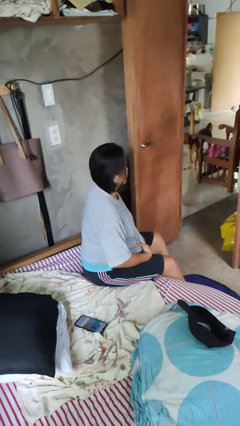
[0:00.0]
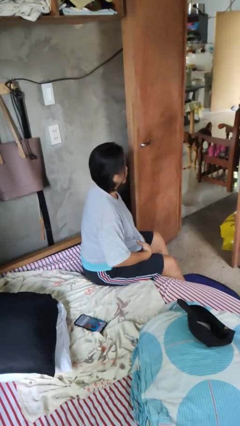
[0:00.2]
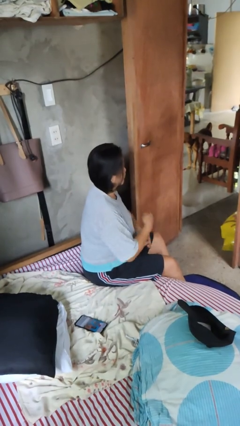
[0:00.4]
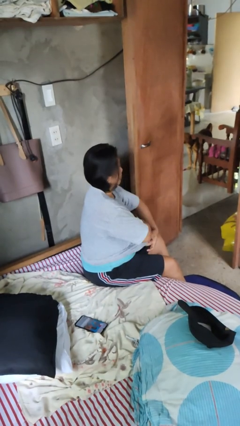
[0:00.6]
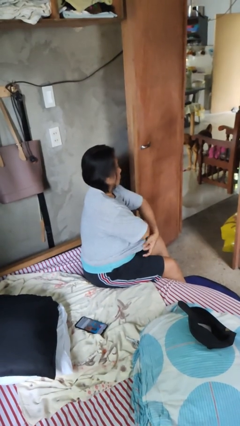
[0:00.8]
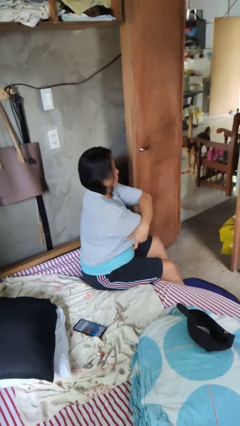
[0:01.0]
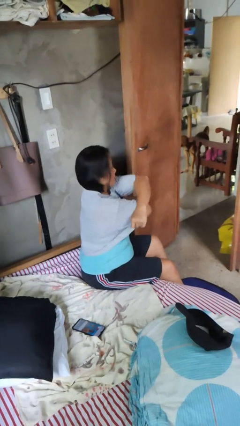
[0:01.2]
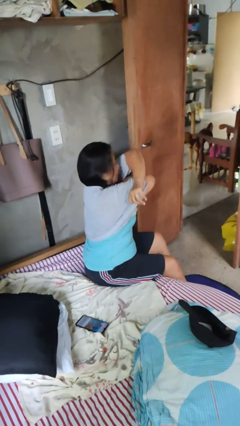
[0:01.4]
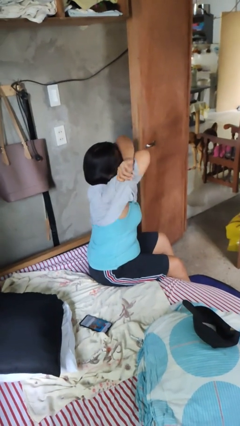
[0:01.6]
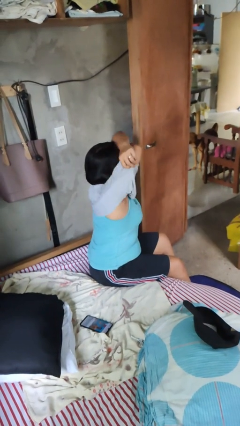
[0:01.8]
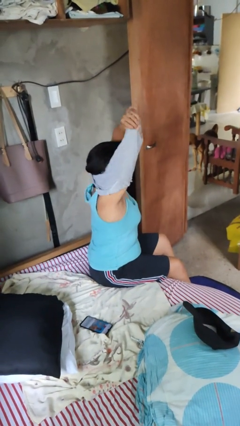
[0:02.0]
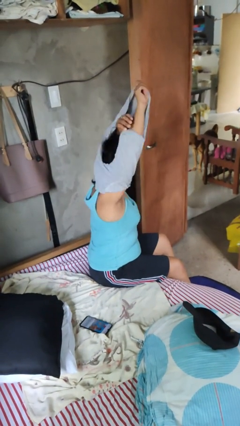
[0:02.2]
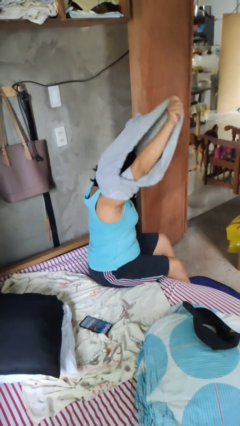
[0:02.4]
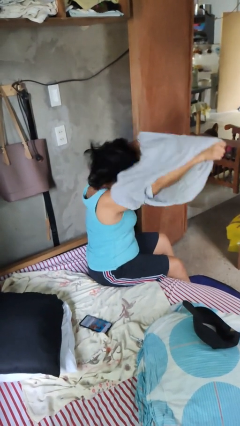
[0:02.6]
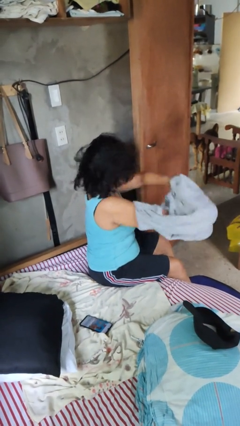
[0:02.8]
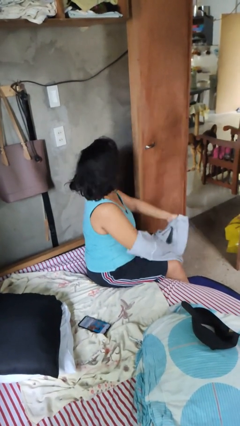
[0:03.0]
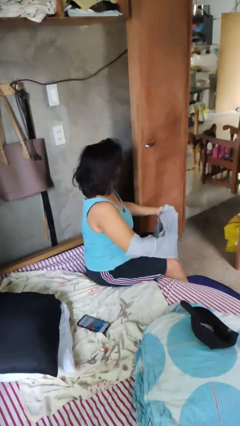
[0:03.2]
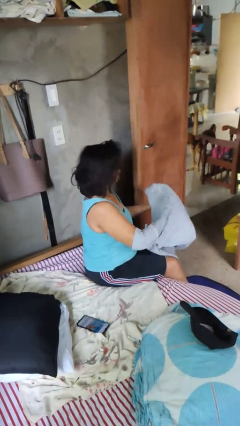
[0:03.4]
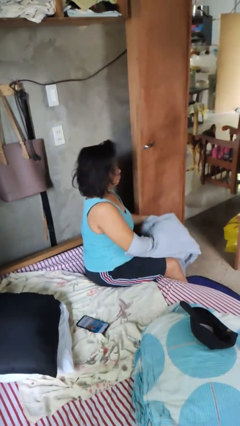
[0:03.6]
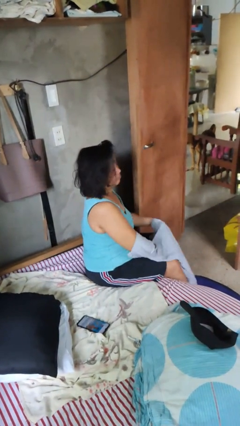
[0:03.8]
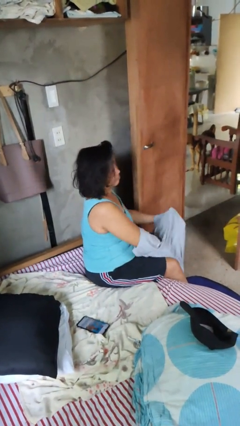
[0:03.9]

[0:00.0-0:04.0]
person takes off shirt

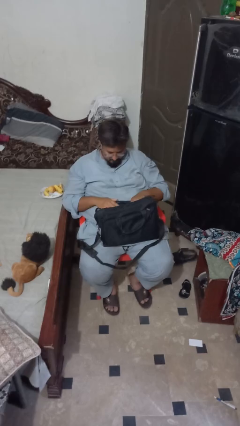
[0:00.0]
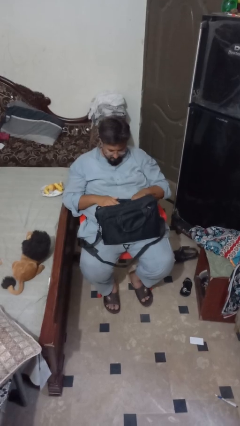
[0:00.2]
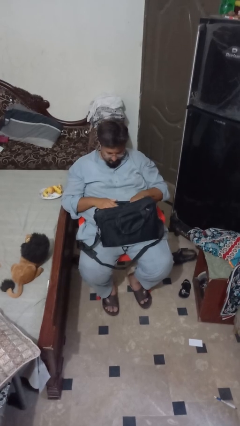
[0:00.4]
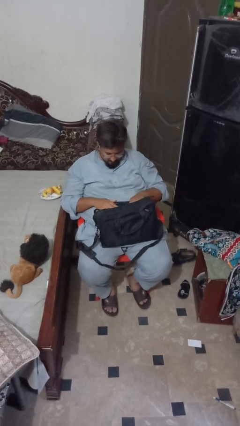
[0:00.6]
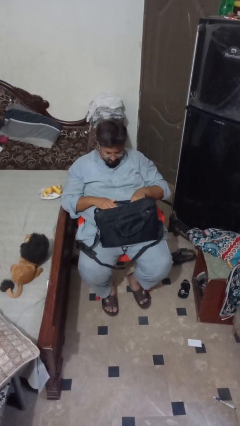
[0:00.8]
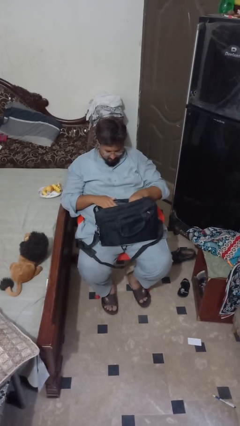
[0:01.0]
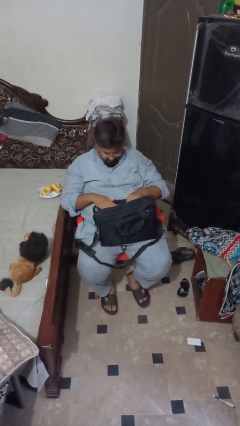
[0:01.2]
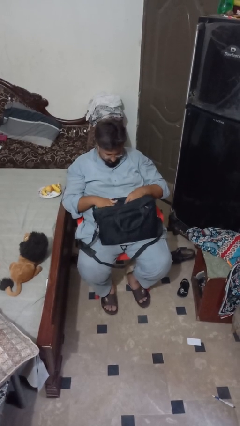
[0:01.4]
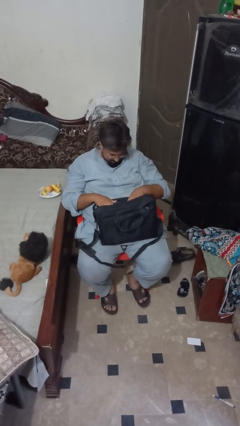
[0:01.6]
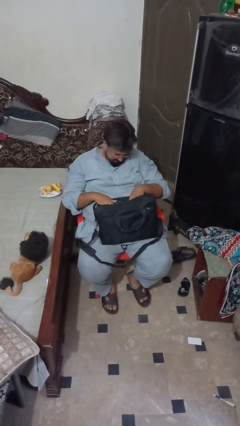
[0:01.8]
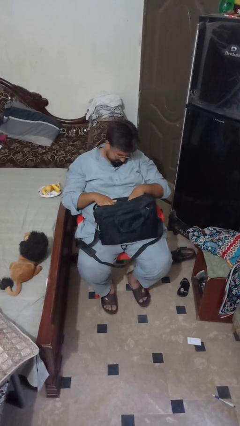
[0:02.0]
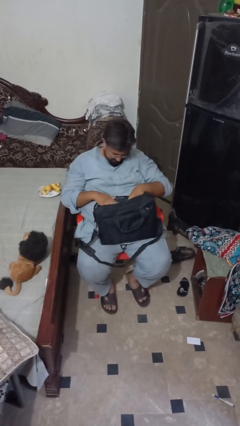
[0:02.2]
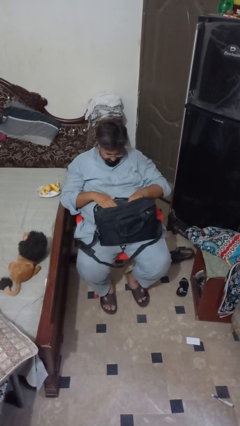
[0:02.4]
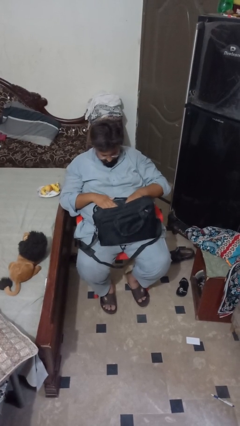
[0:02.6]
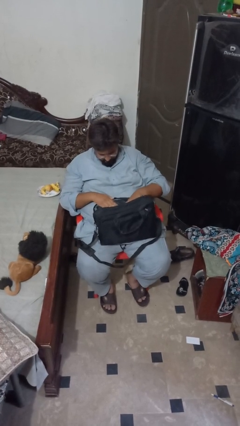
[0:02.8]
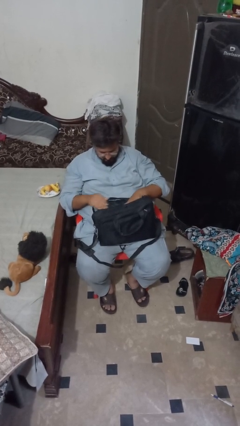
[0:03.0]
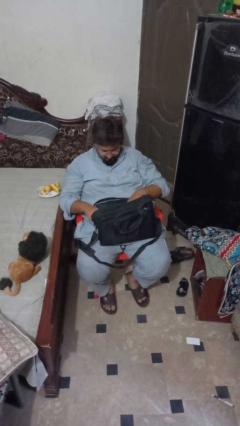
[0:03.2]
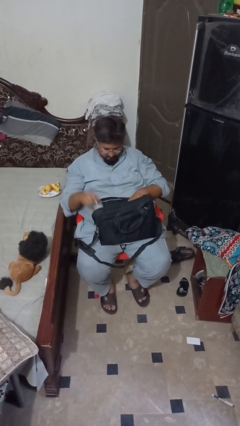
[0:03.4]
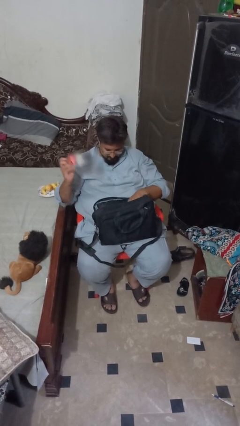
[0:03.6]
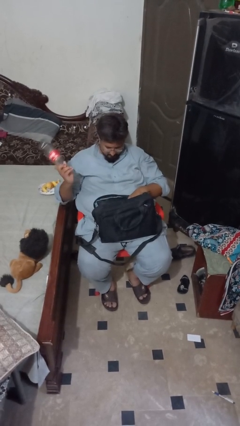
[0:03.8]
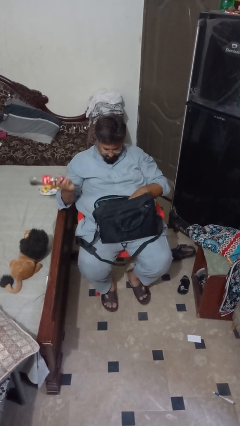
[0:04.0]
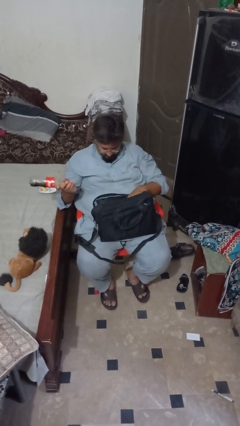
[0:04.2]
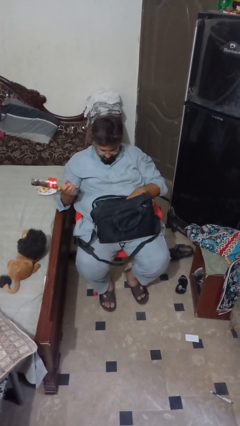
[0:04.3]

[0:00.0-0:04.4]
person takes object from bag

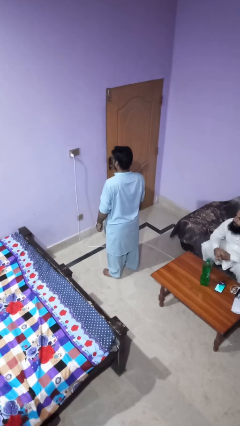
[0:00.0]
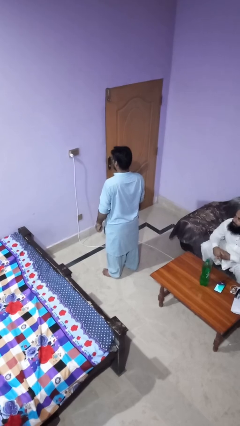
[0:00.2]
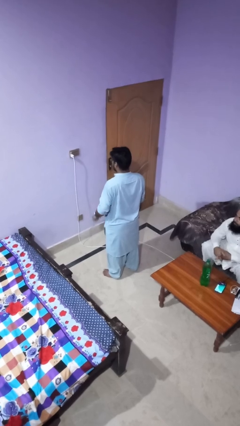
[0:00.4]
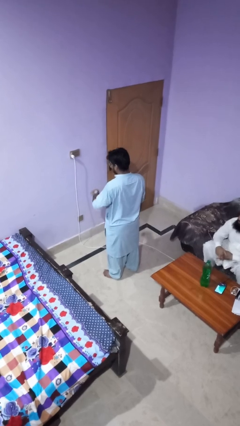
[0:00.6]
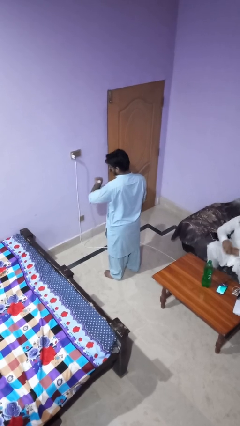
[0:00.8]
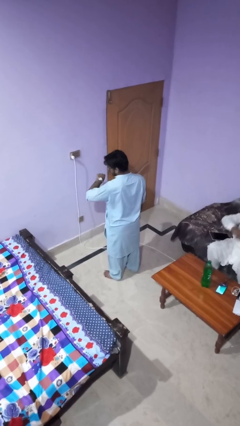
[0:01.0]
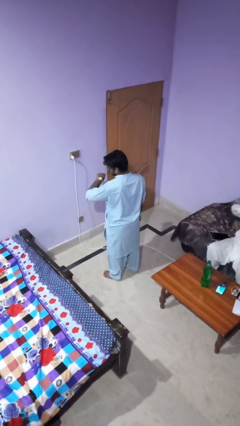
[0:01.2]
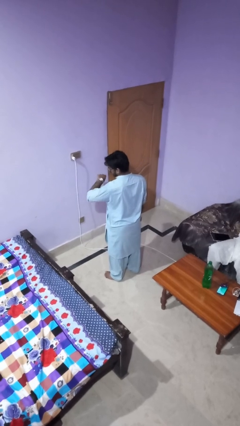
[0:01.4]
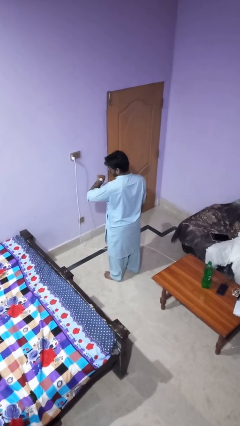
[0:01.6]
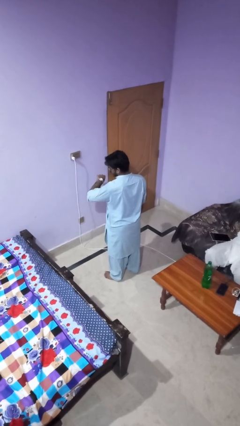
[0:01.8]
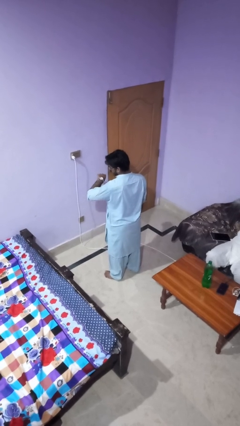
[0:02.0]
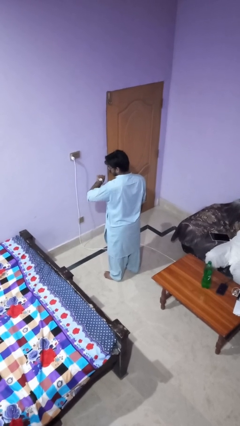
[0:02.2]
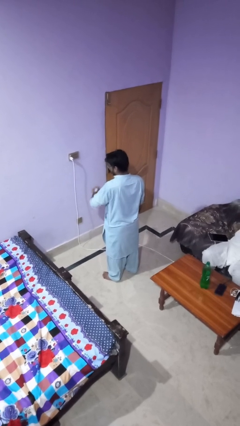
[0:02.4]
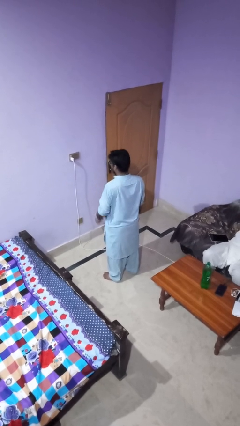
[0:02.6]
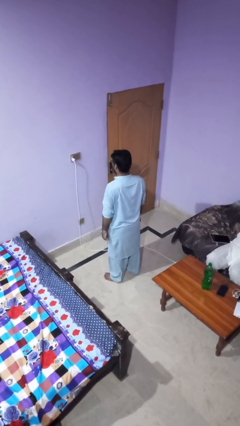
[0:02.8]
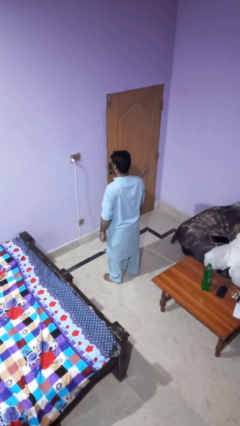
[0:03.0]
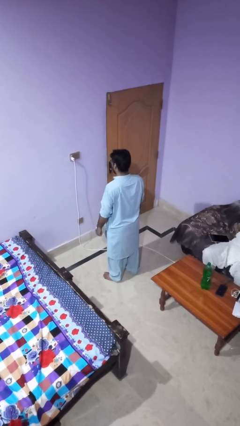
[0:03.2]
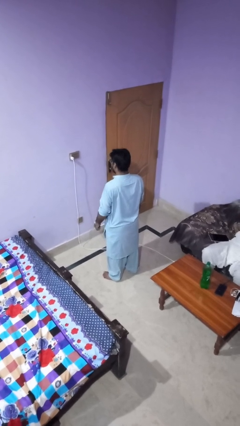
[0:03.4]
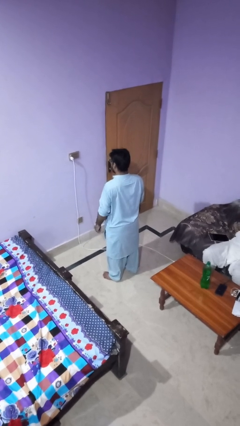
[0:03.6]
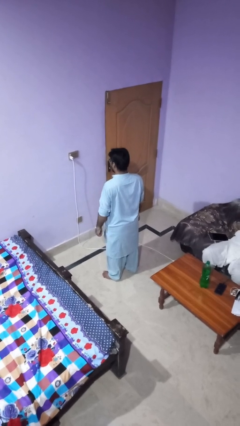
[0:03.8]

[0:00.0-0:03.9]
person looks at wristwatch

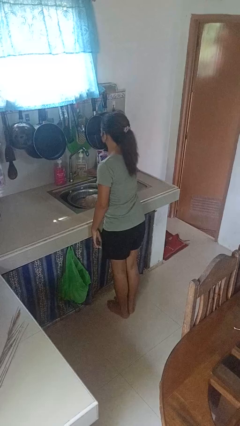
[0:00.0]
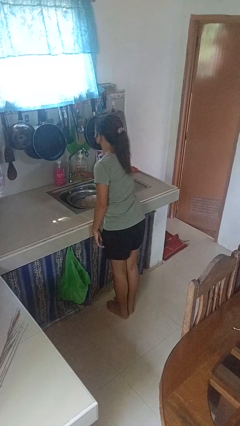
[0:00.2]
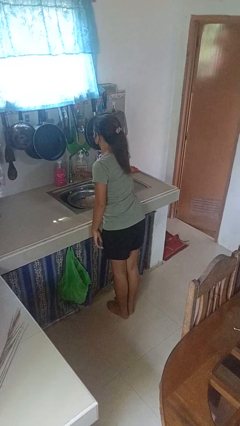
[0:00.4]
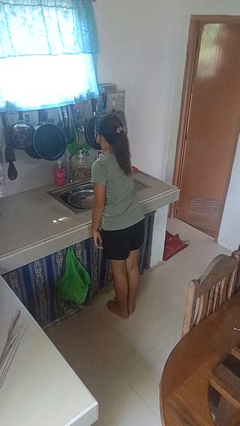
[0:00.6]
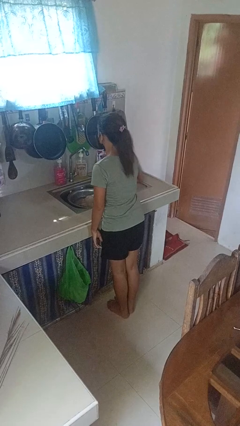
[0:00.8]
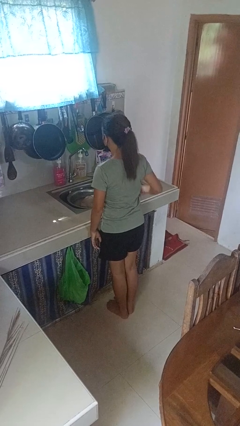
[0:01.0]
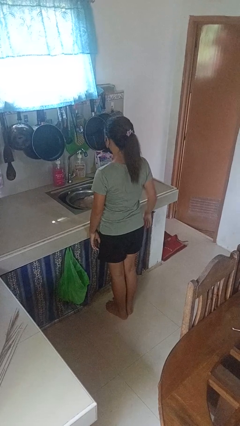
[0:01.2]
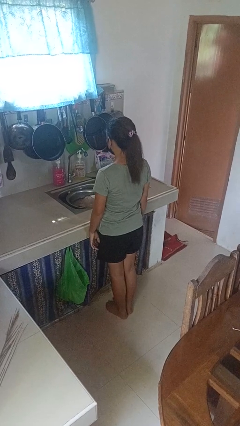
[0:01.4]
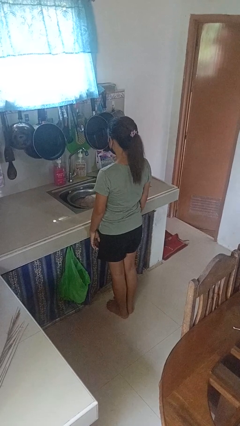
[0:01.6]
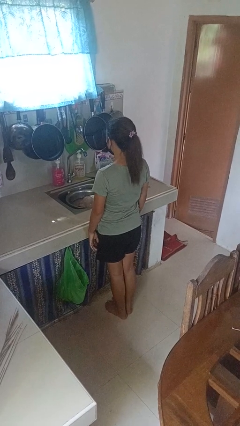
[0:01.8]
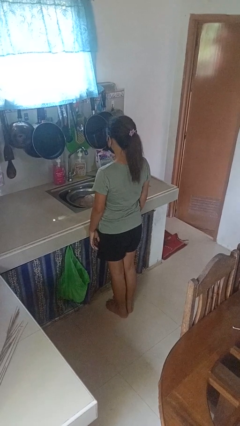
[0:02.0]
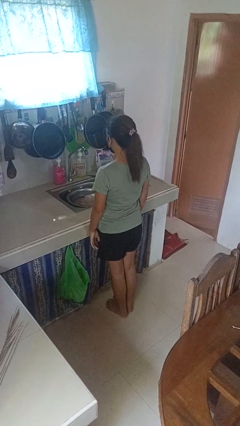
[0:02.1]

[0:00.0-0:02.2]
person turns off faucet

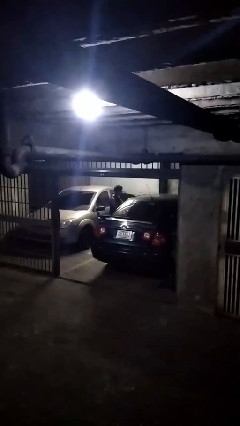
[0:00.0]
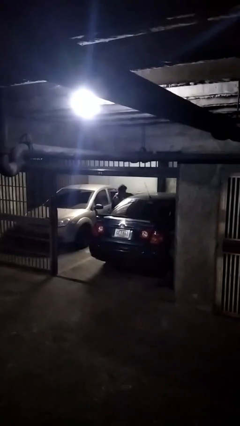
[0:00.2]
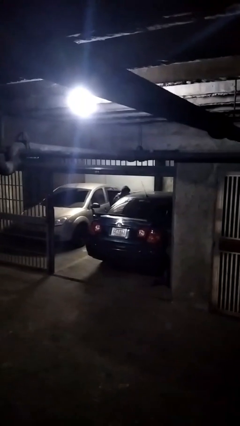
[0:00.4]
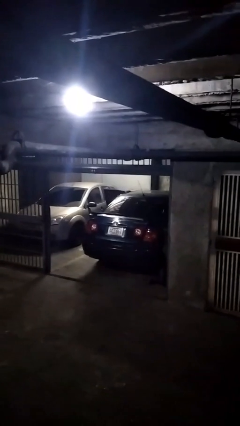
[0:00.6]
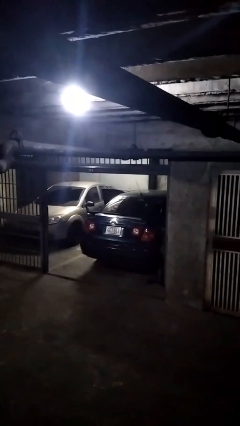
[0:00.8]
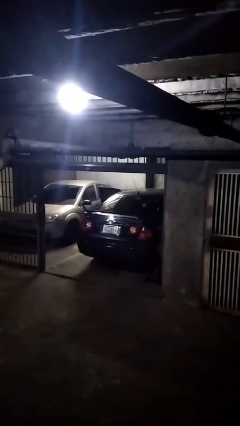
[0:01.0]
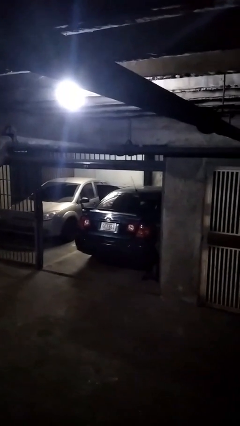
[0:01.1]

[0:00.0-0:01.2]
person loads car

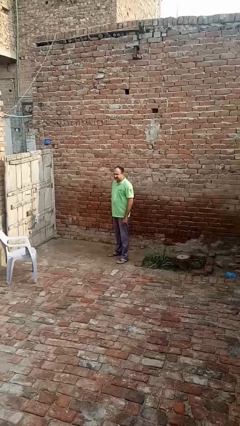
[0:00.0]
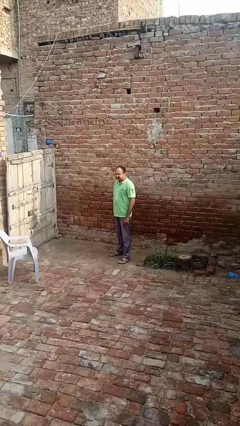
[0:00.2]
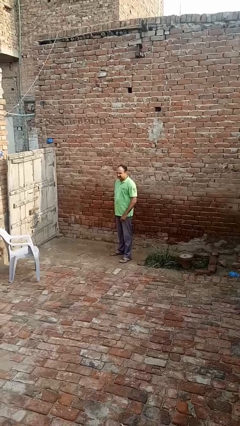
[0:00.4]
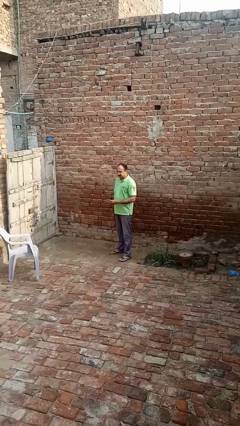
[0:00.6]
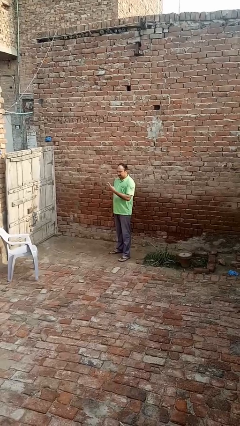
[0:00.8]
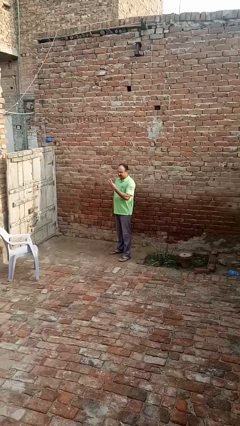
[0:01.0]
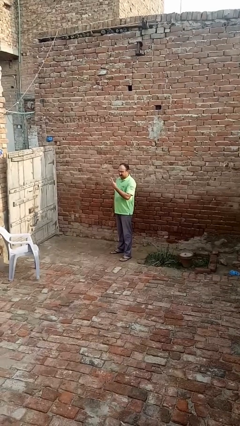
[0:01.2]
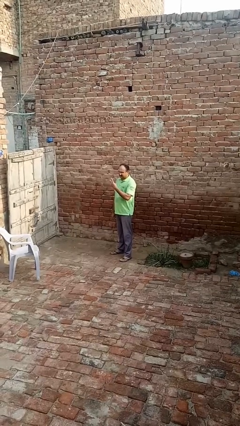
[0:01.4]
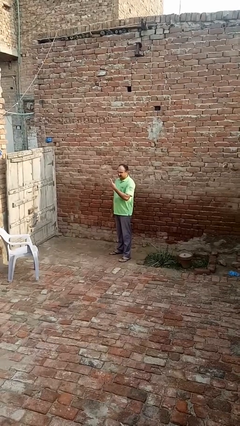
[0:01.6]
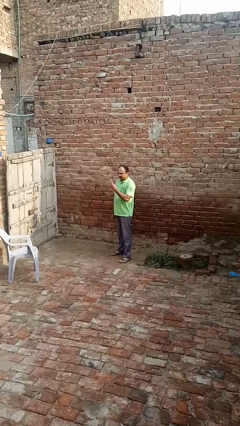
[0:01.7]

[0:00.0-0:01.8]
person gestures peace
